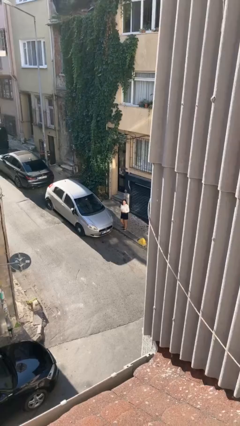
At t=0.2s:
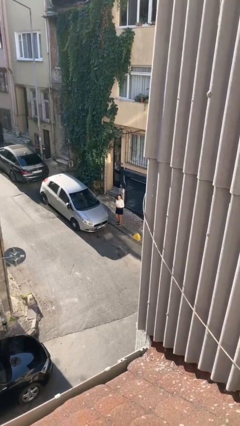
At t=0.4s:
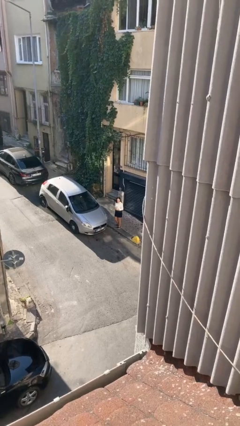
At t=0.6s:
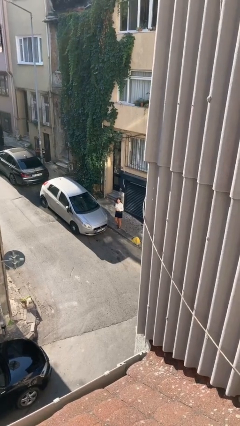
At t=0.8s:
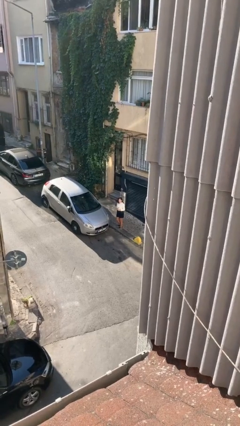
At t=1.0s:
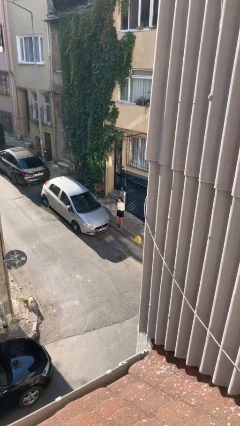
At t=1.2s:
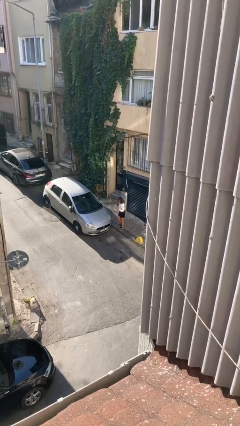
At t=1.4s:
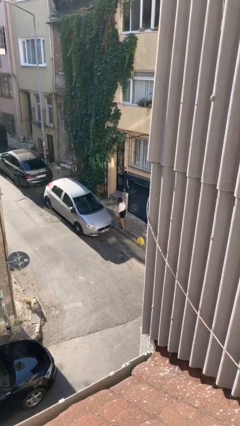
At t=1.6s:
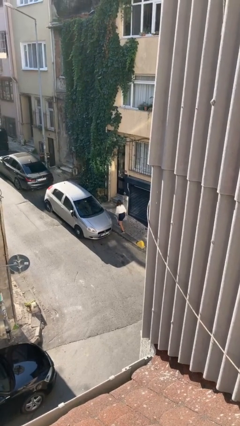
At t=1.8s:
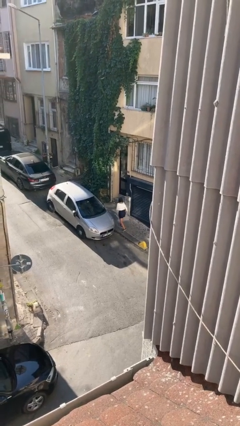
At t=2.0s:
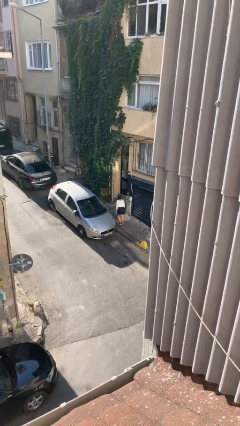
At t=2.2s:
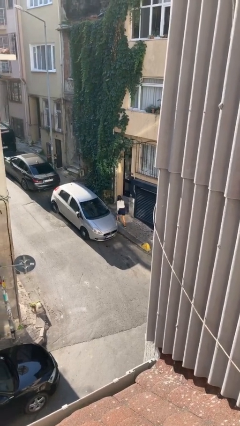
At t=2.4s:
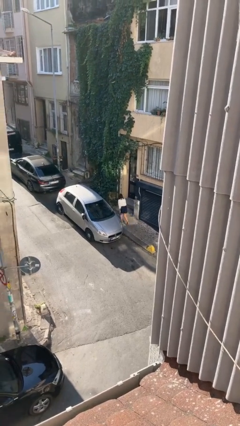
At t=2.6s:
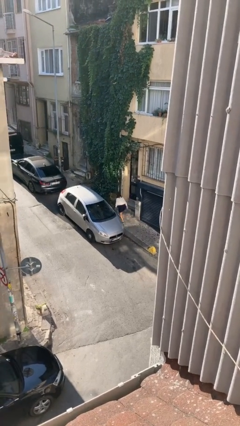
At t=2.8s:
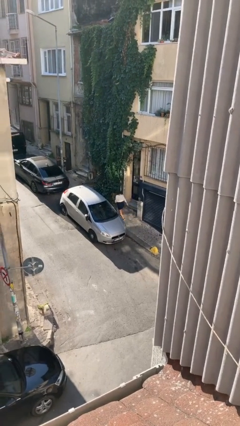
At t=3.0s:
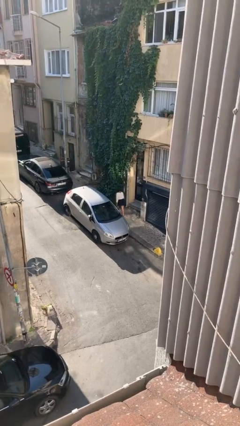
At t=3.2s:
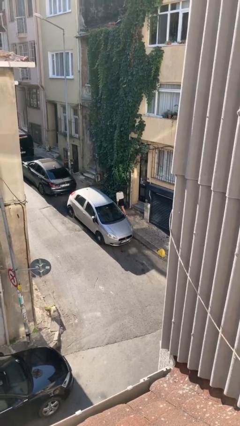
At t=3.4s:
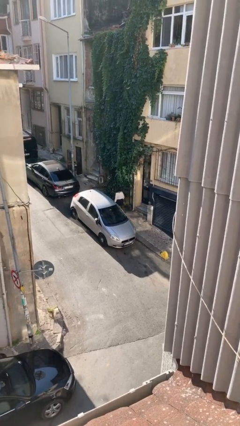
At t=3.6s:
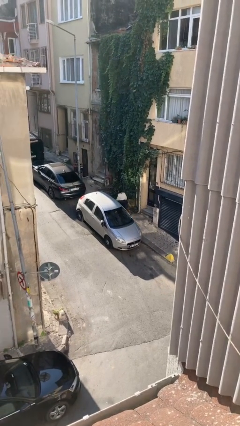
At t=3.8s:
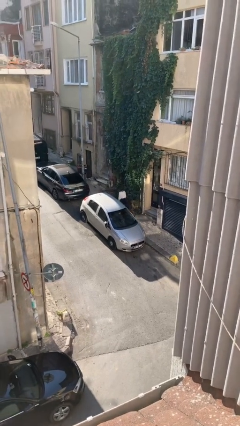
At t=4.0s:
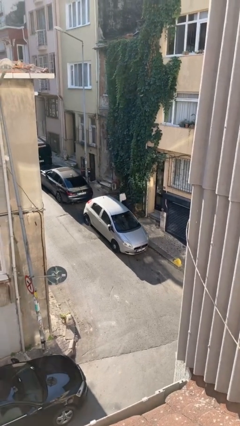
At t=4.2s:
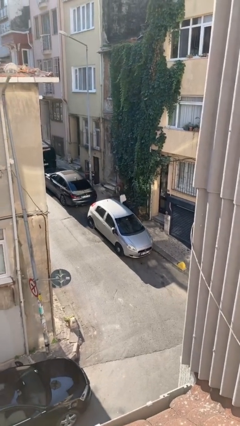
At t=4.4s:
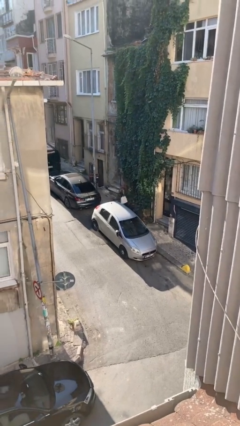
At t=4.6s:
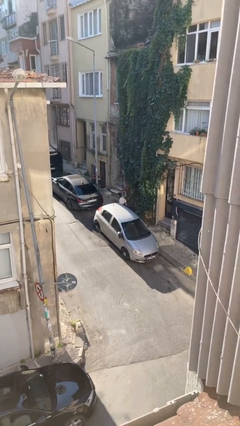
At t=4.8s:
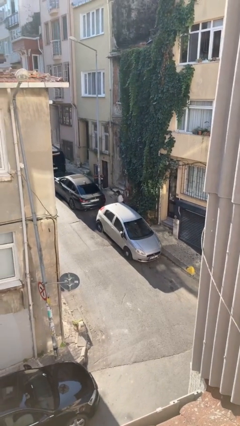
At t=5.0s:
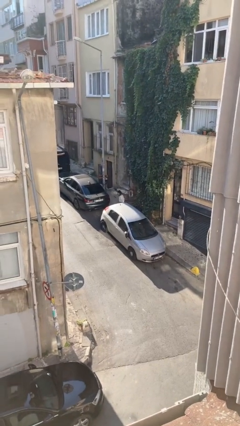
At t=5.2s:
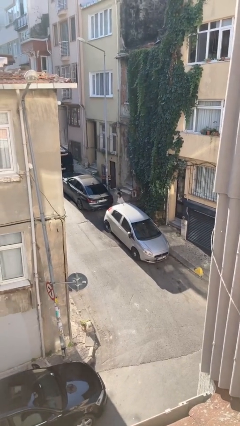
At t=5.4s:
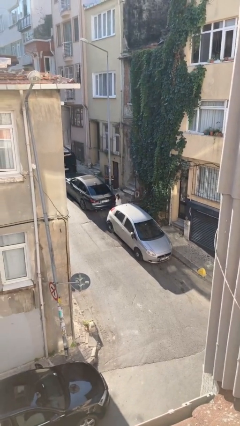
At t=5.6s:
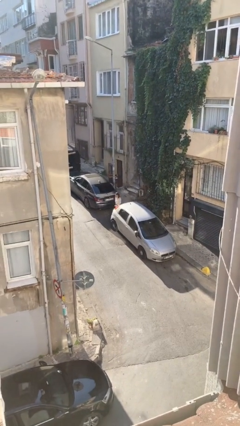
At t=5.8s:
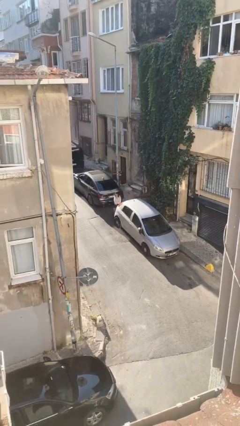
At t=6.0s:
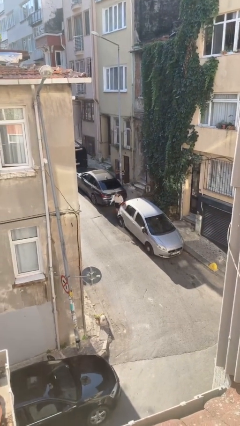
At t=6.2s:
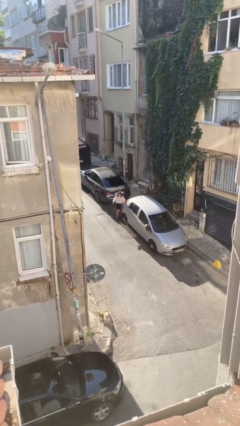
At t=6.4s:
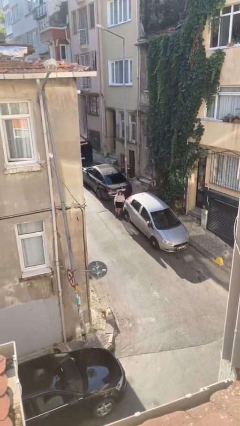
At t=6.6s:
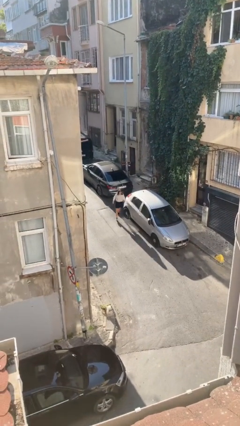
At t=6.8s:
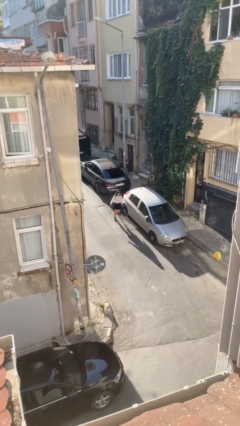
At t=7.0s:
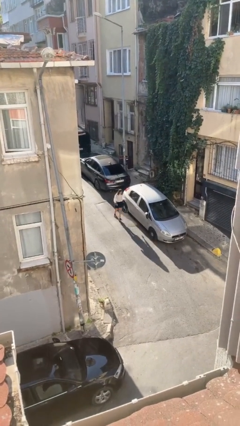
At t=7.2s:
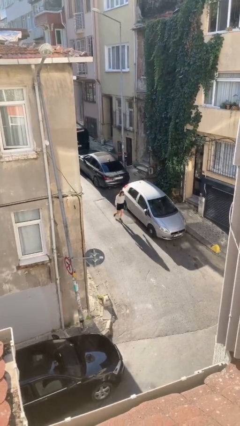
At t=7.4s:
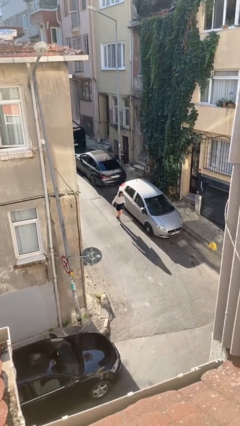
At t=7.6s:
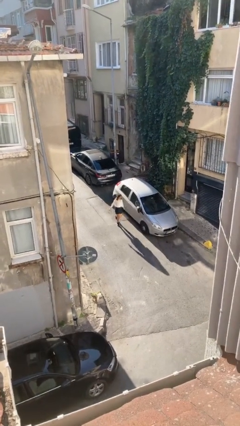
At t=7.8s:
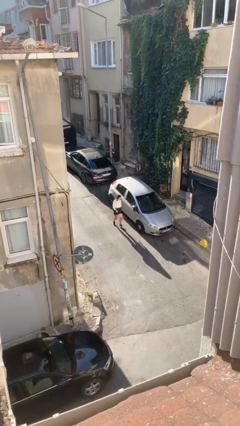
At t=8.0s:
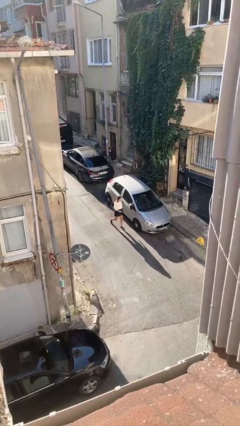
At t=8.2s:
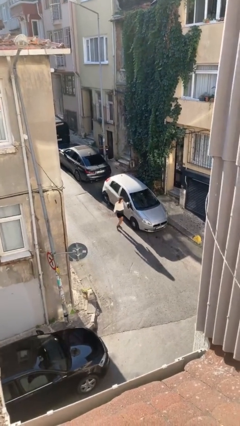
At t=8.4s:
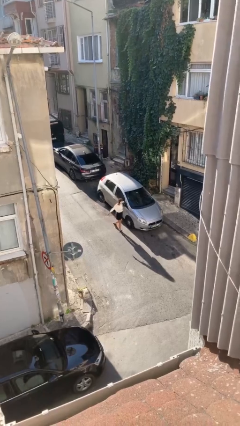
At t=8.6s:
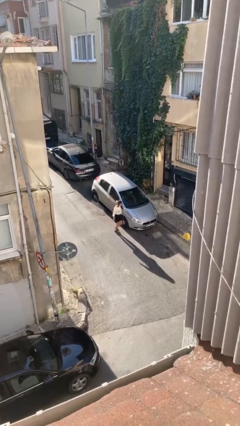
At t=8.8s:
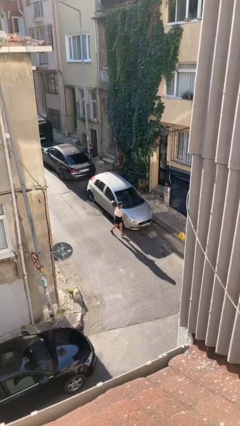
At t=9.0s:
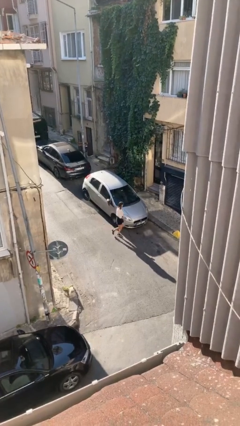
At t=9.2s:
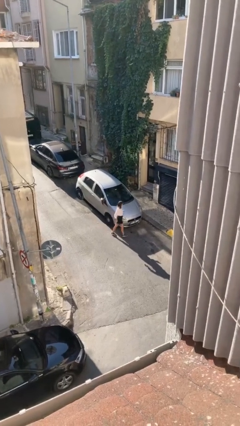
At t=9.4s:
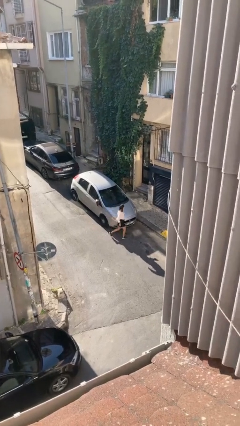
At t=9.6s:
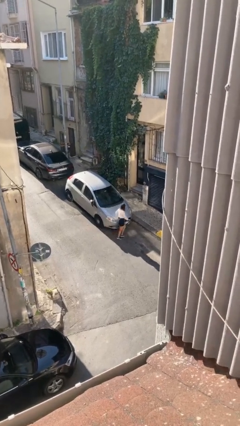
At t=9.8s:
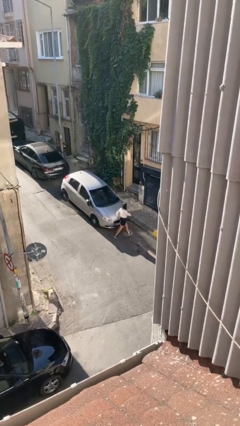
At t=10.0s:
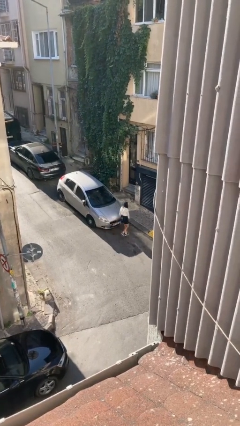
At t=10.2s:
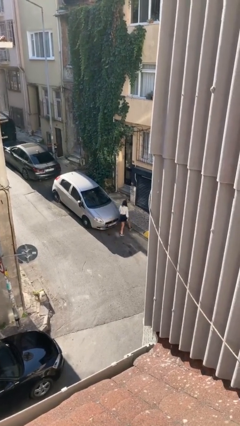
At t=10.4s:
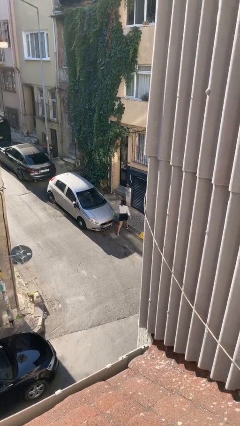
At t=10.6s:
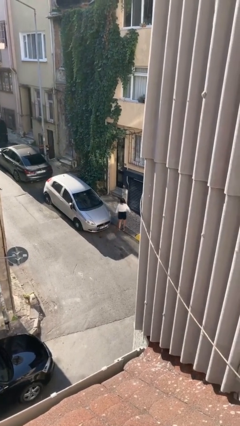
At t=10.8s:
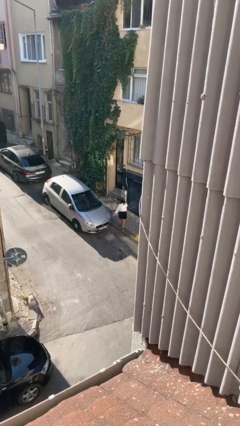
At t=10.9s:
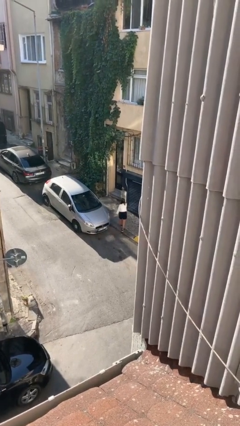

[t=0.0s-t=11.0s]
person walks around car

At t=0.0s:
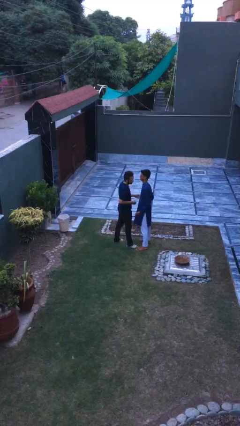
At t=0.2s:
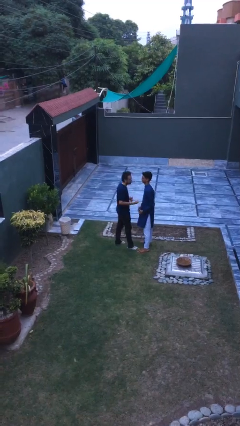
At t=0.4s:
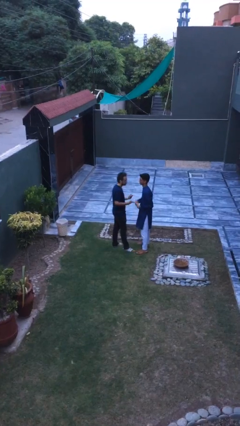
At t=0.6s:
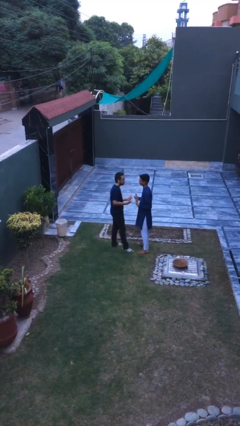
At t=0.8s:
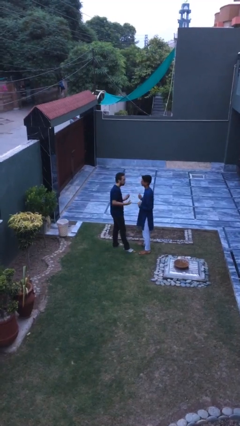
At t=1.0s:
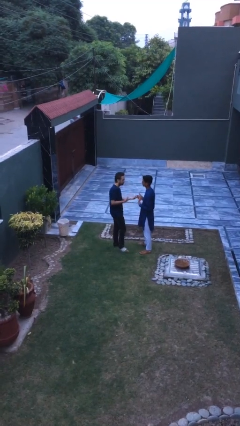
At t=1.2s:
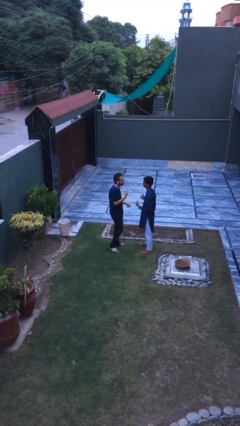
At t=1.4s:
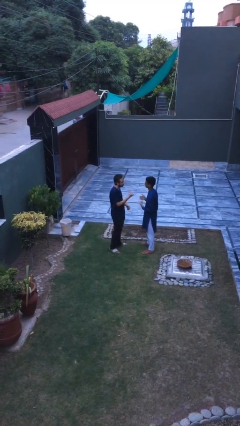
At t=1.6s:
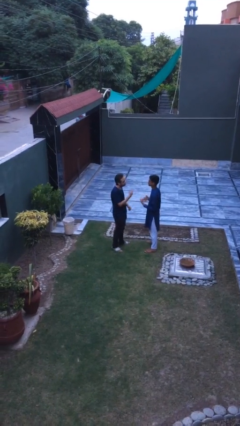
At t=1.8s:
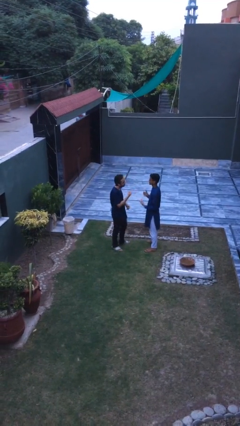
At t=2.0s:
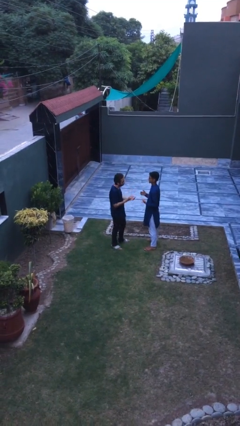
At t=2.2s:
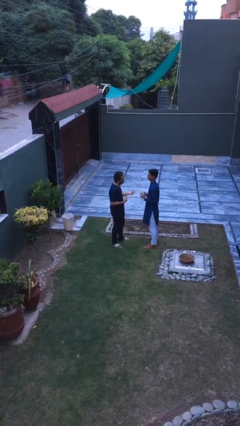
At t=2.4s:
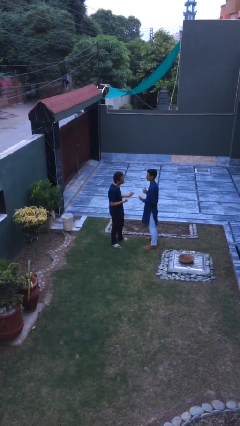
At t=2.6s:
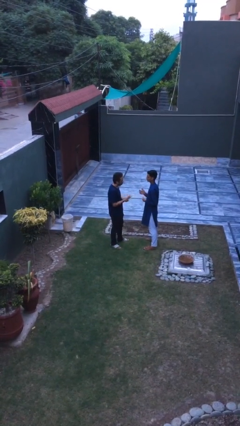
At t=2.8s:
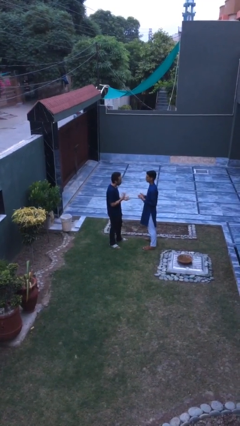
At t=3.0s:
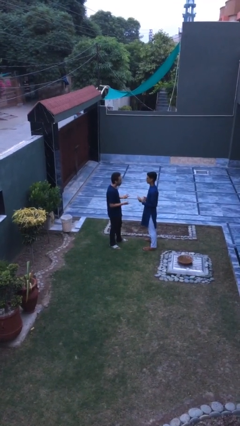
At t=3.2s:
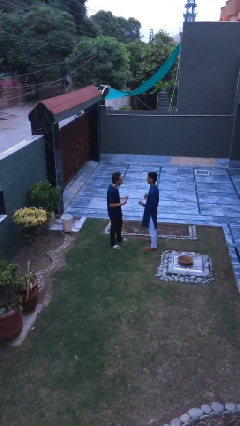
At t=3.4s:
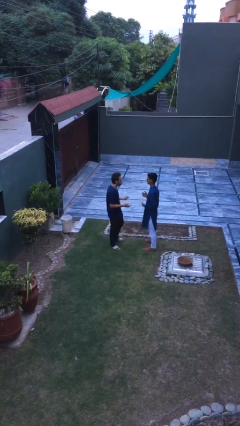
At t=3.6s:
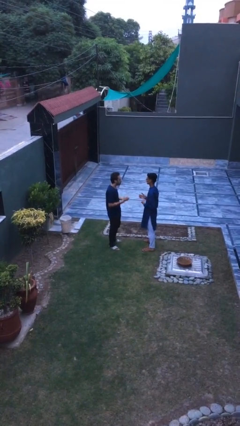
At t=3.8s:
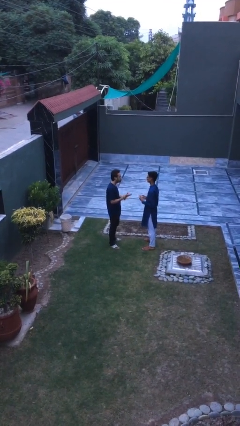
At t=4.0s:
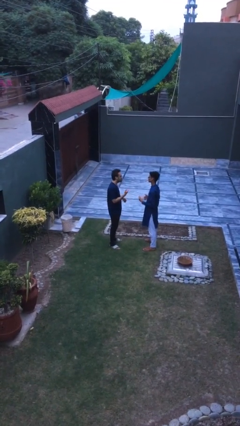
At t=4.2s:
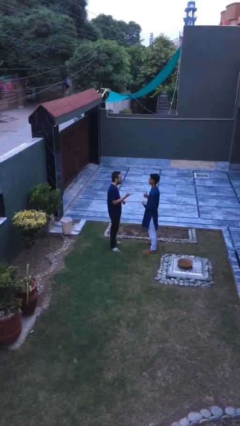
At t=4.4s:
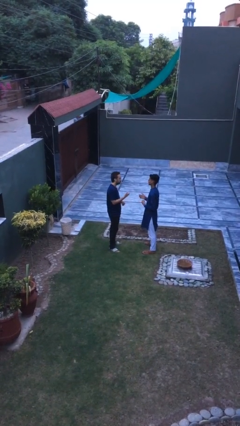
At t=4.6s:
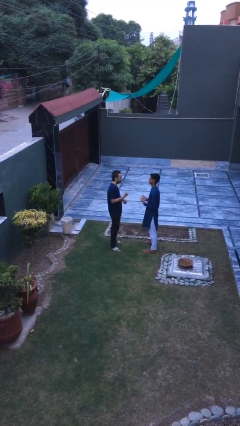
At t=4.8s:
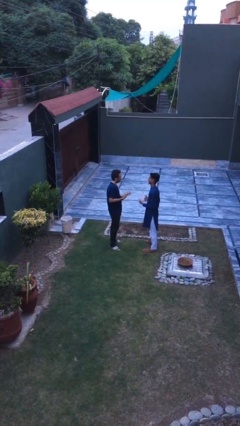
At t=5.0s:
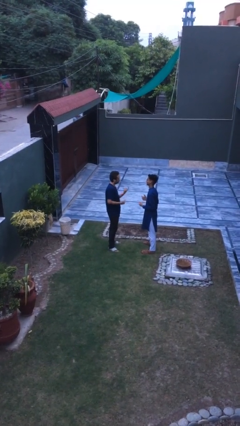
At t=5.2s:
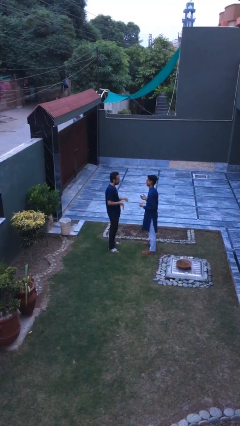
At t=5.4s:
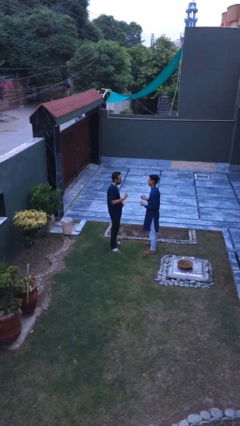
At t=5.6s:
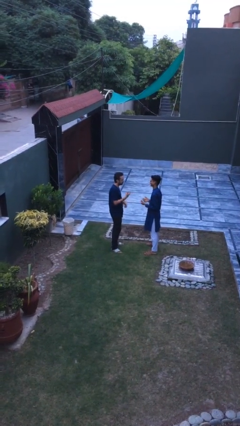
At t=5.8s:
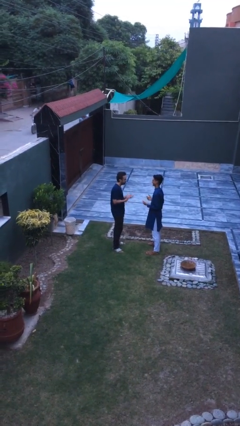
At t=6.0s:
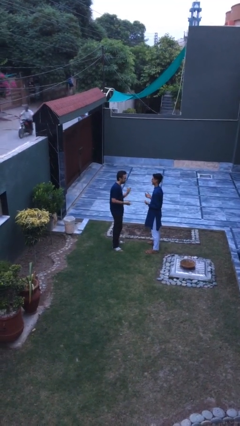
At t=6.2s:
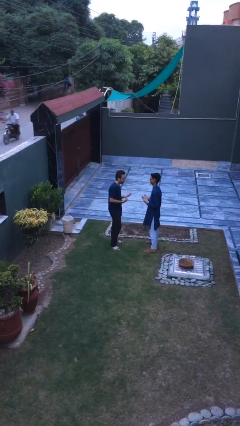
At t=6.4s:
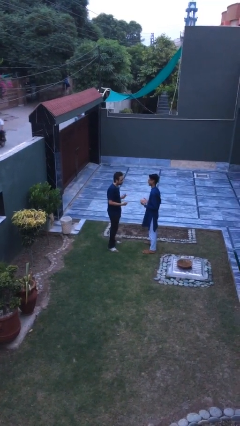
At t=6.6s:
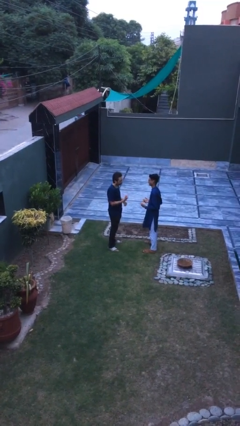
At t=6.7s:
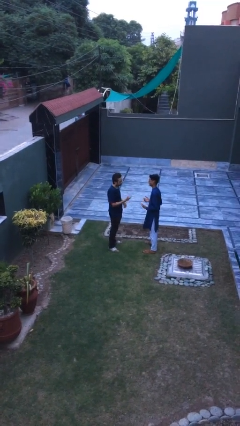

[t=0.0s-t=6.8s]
person talks to person

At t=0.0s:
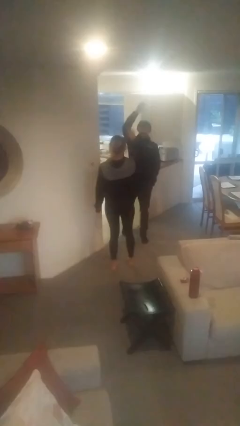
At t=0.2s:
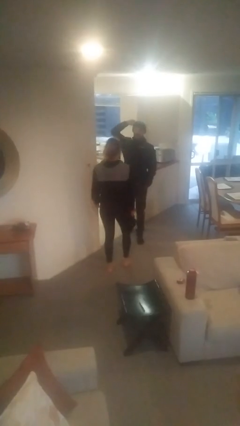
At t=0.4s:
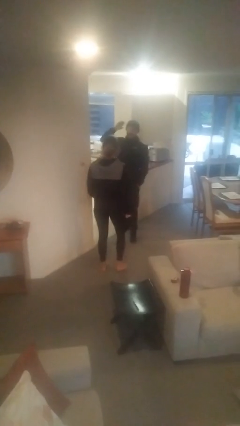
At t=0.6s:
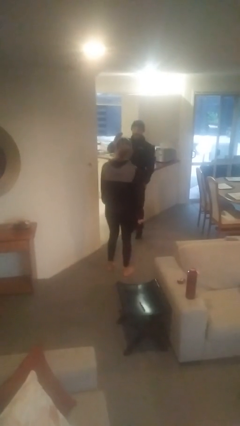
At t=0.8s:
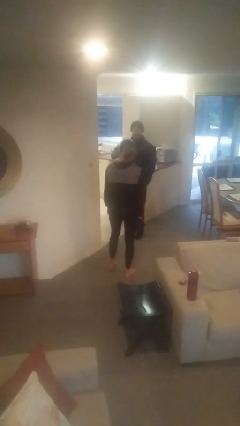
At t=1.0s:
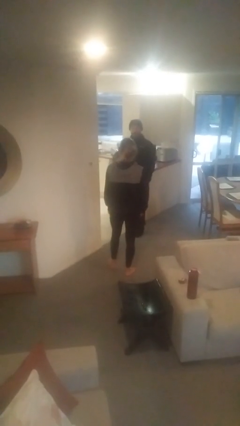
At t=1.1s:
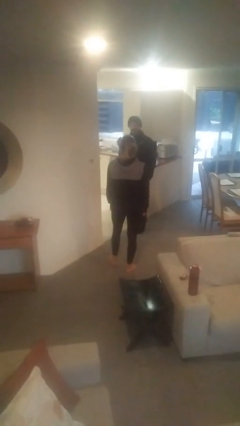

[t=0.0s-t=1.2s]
person highfives hand
